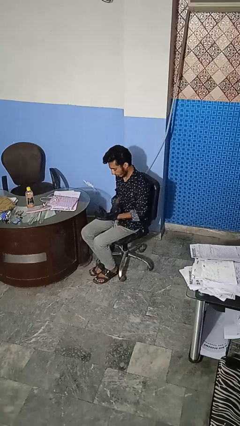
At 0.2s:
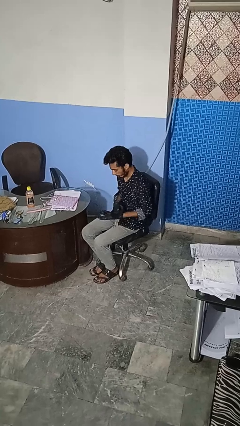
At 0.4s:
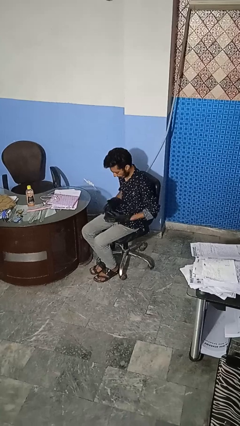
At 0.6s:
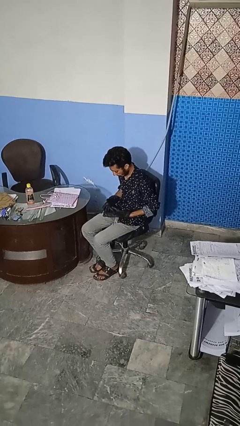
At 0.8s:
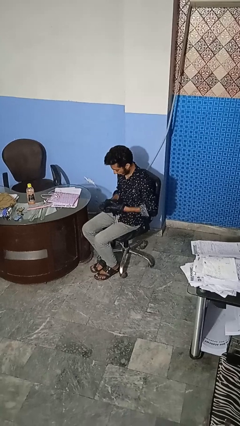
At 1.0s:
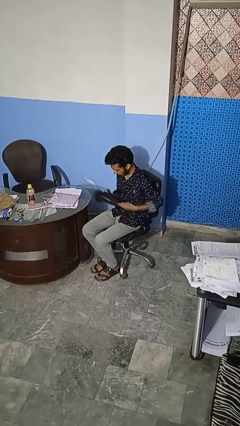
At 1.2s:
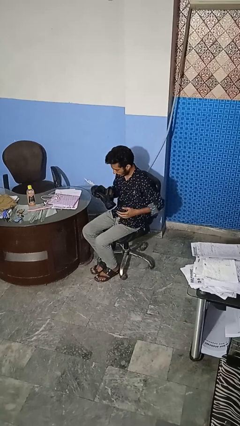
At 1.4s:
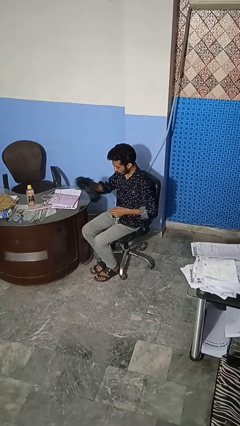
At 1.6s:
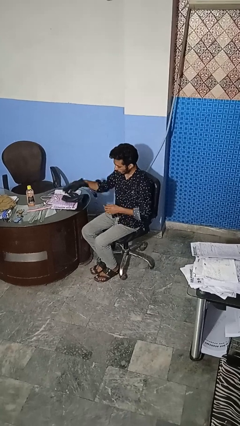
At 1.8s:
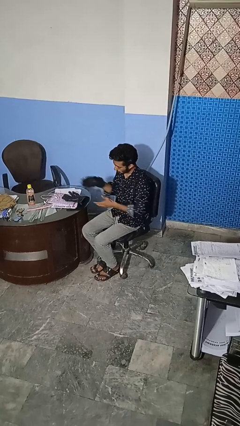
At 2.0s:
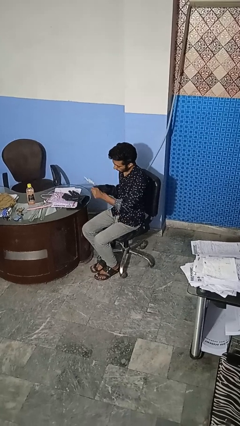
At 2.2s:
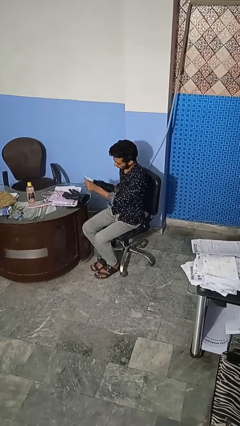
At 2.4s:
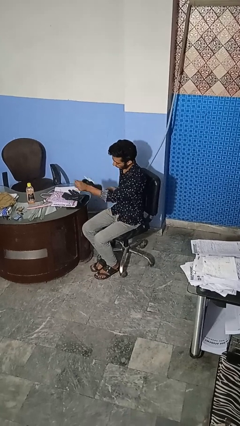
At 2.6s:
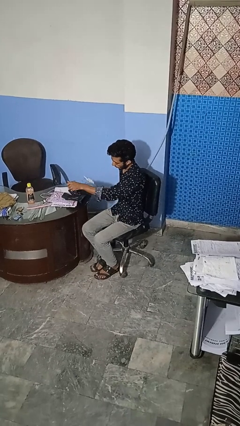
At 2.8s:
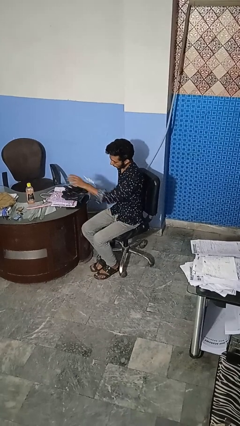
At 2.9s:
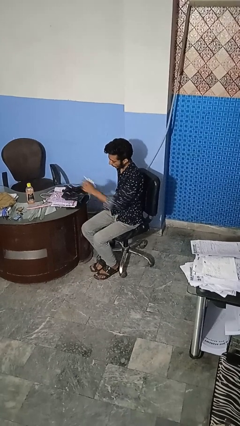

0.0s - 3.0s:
person takes off gloves

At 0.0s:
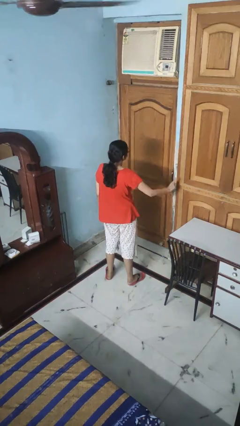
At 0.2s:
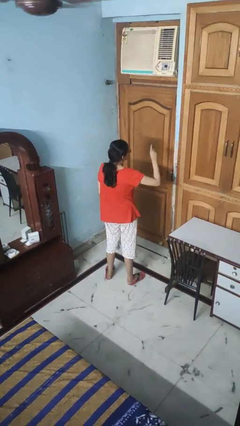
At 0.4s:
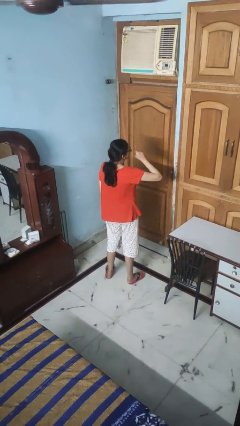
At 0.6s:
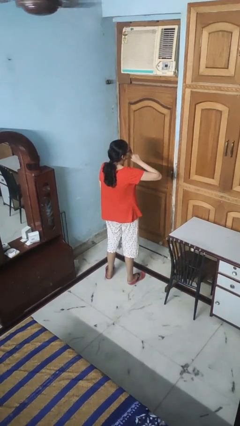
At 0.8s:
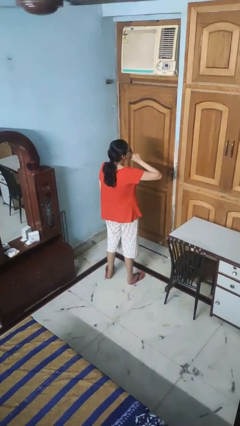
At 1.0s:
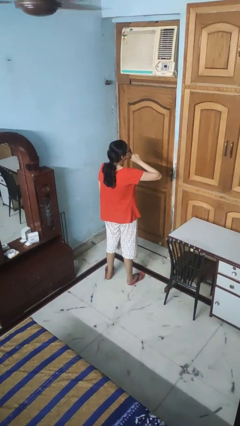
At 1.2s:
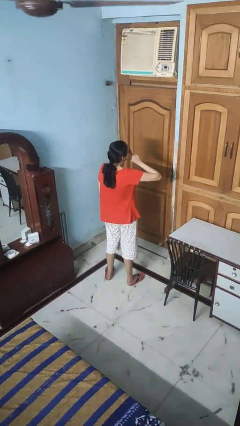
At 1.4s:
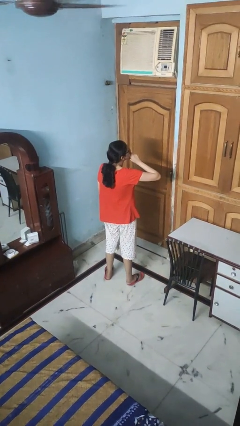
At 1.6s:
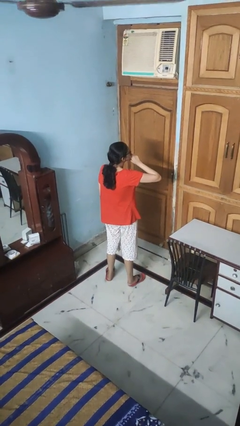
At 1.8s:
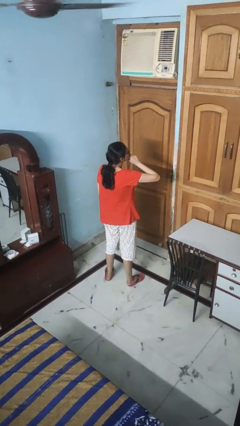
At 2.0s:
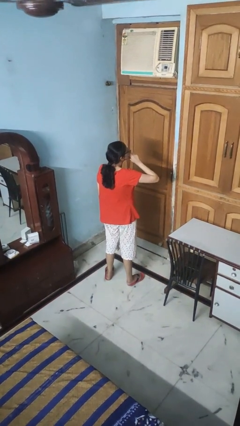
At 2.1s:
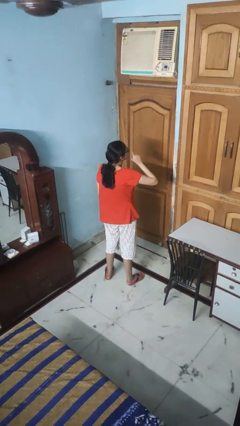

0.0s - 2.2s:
person gestures be quiet

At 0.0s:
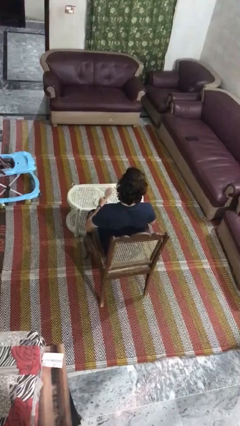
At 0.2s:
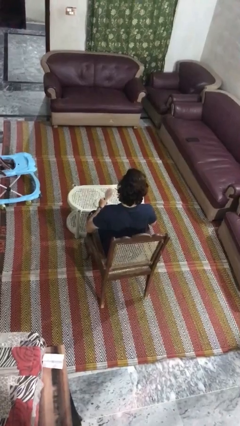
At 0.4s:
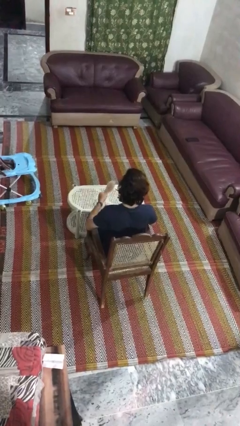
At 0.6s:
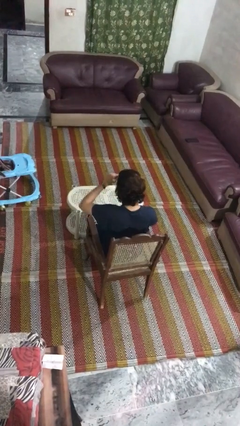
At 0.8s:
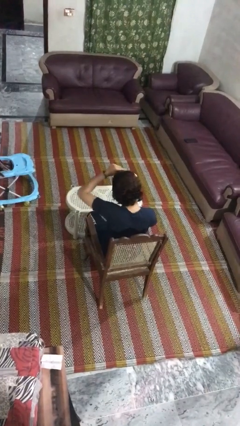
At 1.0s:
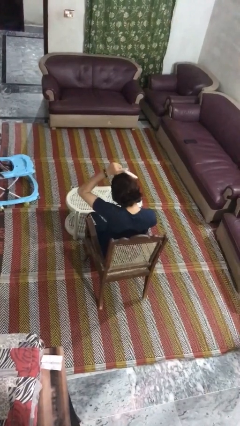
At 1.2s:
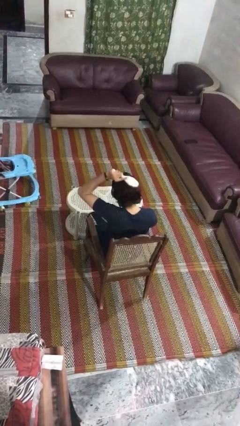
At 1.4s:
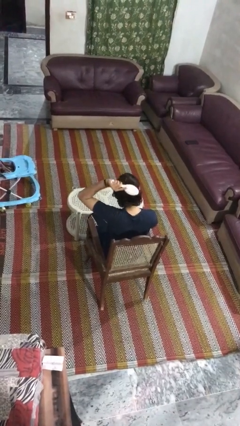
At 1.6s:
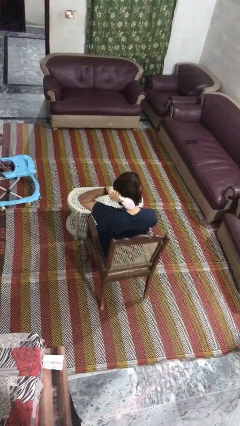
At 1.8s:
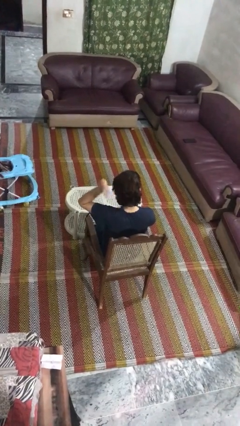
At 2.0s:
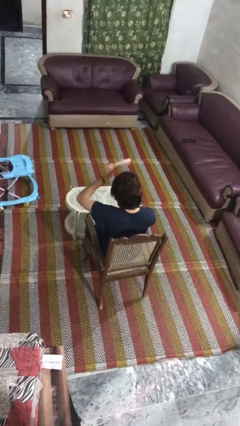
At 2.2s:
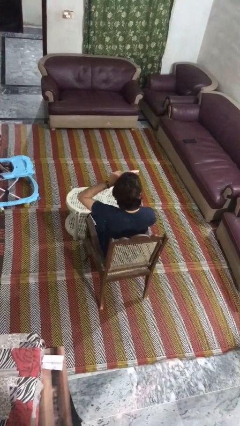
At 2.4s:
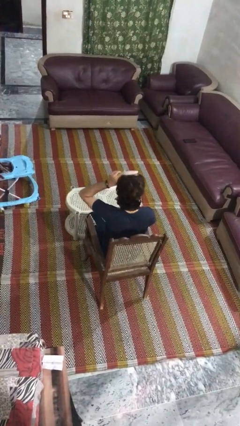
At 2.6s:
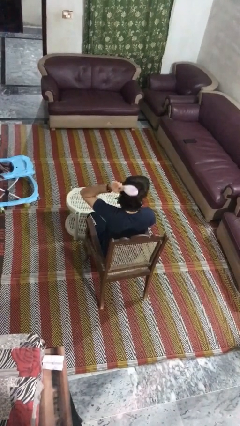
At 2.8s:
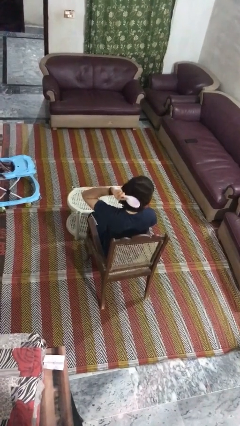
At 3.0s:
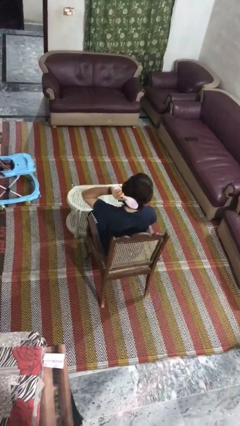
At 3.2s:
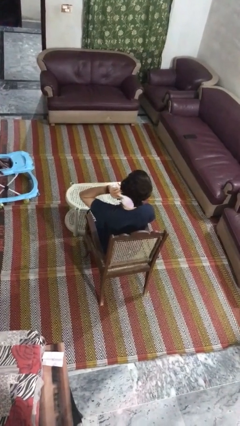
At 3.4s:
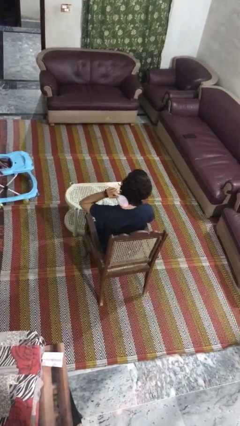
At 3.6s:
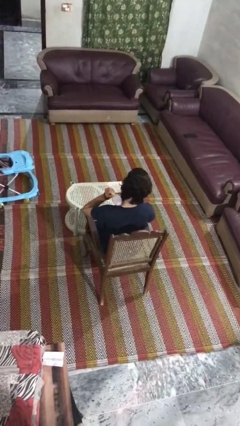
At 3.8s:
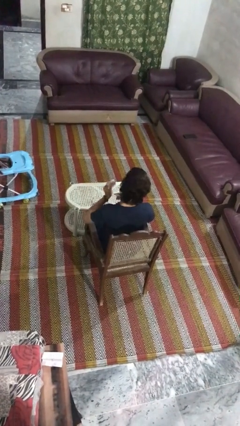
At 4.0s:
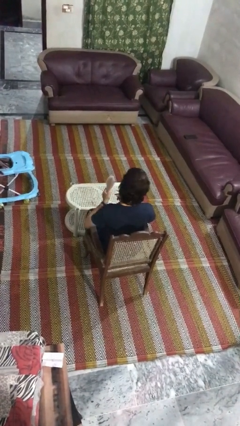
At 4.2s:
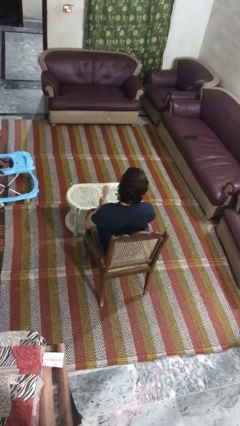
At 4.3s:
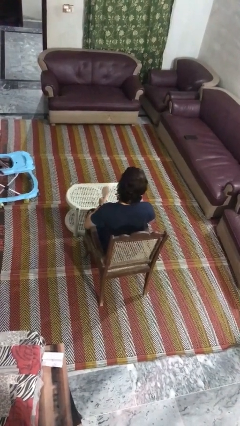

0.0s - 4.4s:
person brushes hair

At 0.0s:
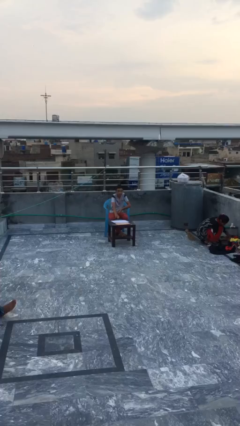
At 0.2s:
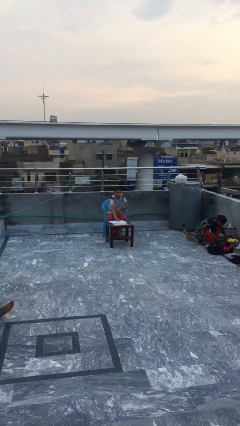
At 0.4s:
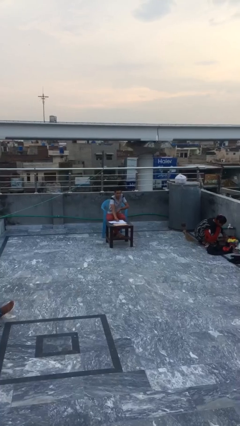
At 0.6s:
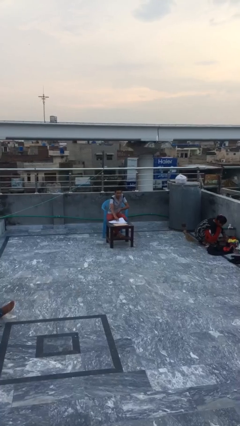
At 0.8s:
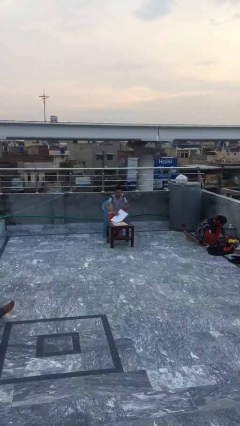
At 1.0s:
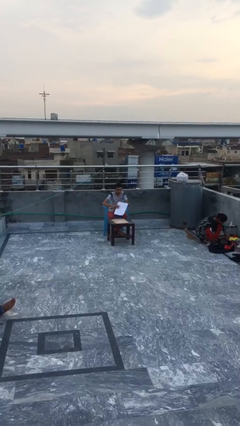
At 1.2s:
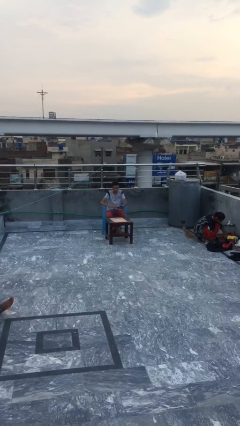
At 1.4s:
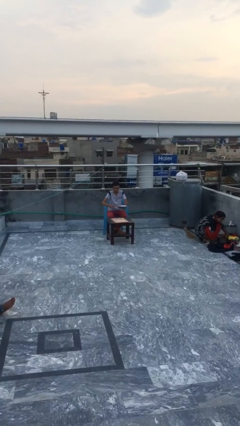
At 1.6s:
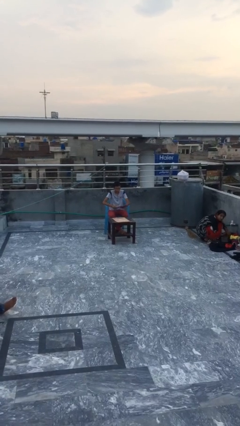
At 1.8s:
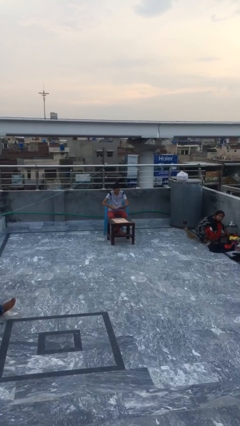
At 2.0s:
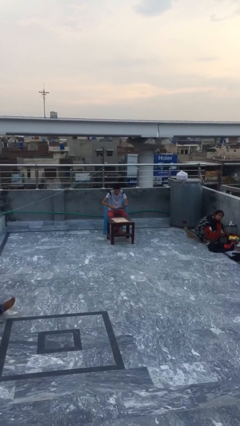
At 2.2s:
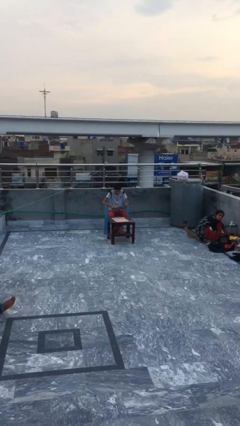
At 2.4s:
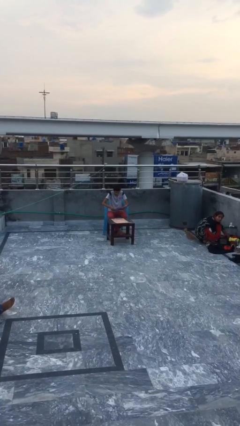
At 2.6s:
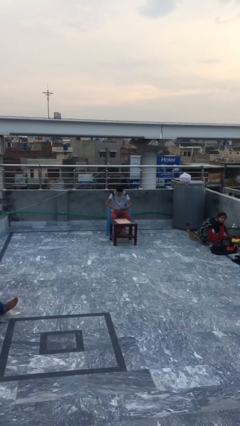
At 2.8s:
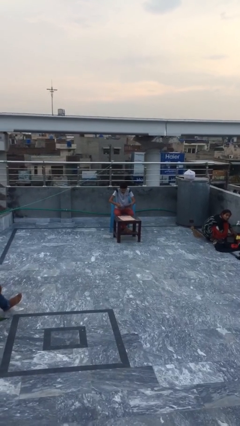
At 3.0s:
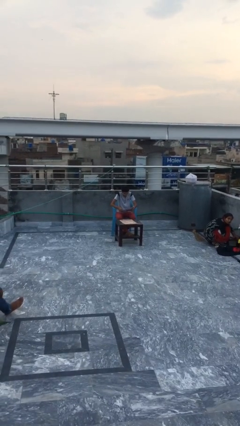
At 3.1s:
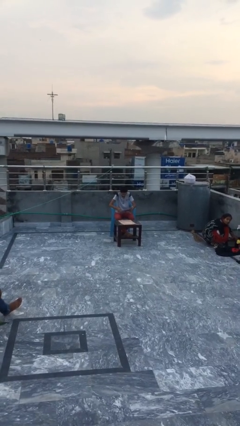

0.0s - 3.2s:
person picks up object from table

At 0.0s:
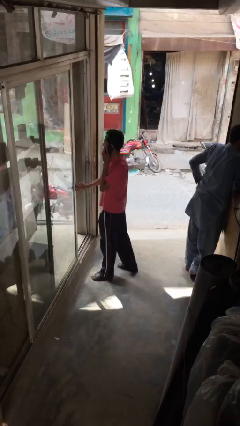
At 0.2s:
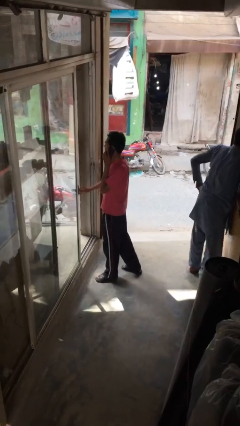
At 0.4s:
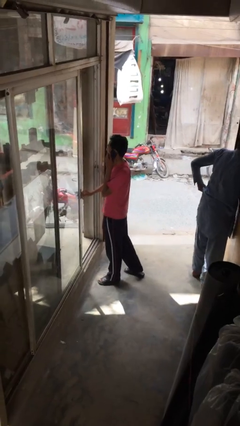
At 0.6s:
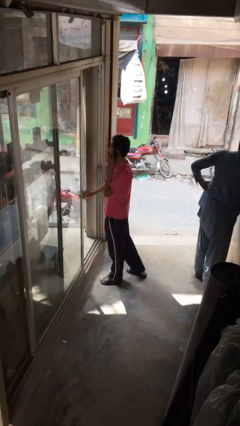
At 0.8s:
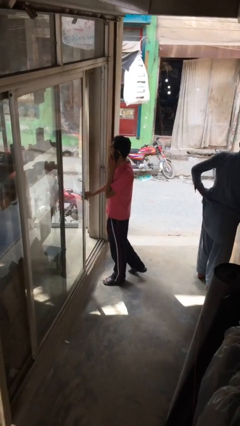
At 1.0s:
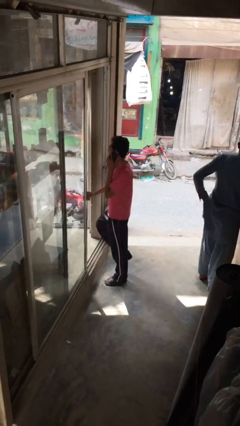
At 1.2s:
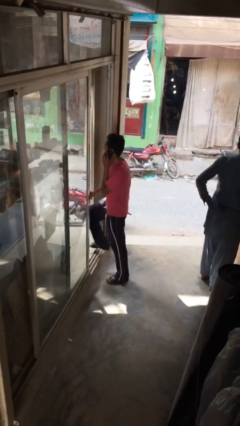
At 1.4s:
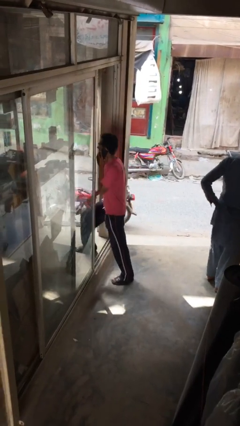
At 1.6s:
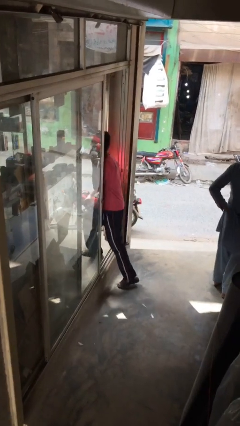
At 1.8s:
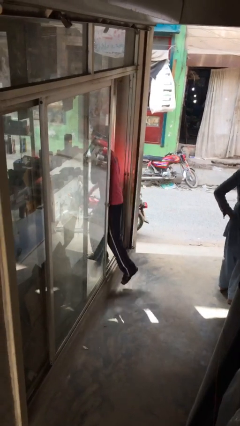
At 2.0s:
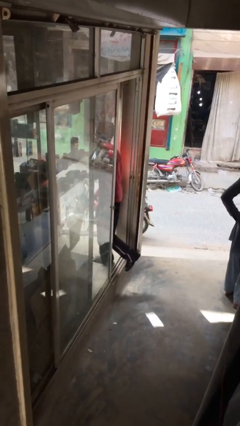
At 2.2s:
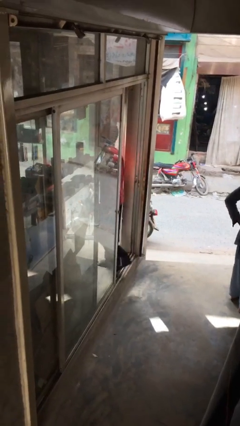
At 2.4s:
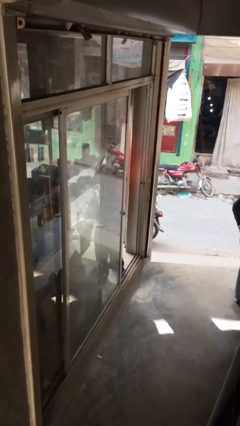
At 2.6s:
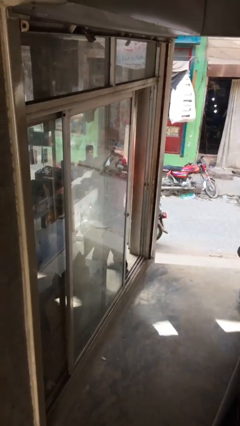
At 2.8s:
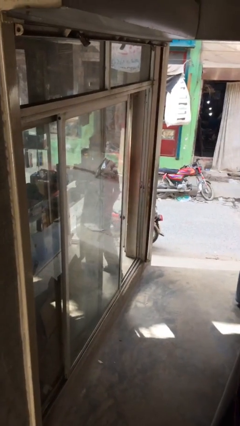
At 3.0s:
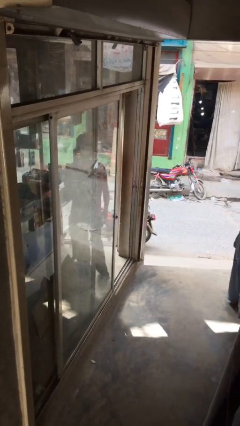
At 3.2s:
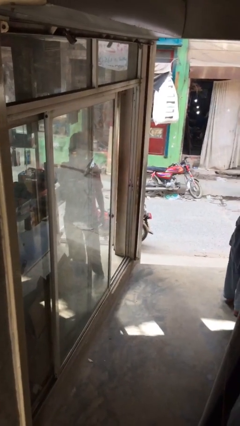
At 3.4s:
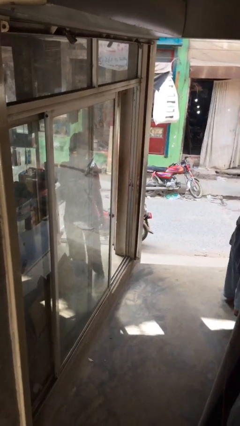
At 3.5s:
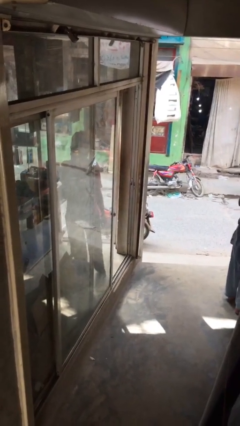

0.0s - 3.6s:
person exits scene through structure

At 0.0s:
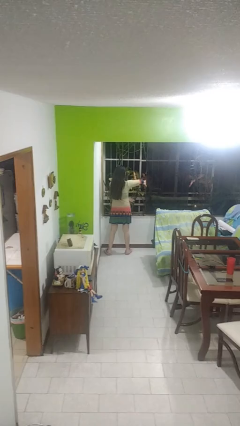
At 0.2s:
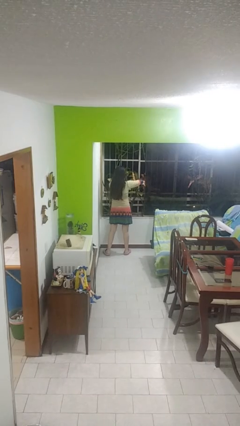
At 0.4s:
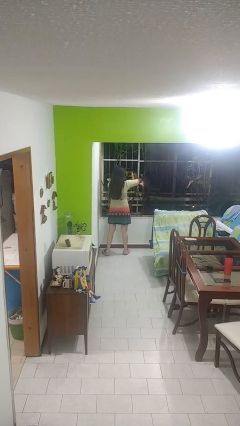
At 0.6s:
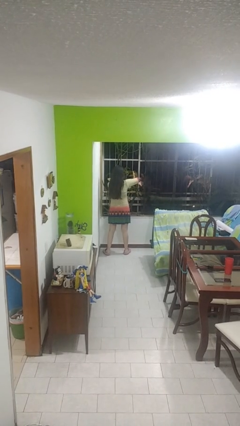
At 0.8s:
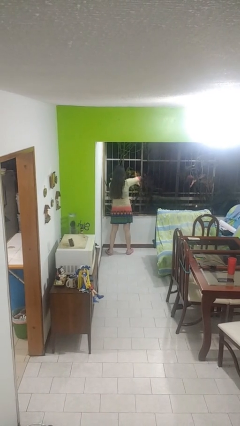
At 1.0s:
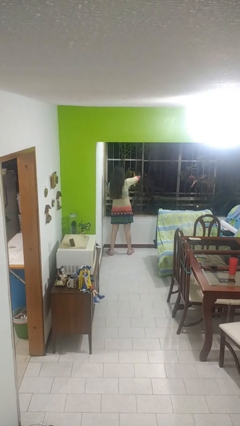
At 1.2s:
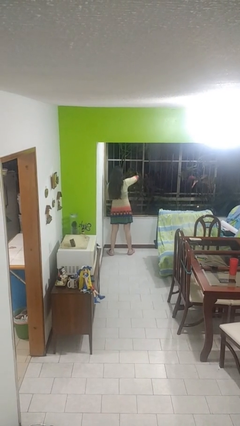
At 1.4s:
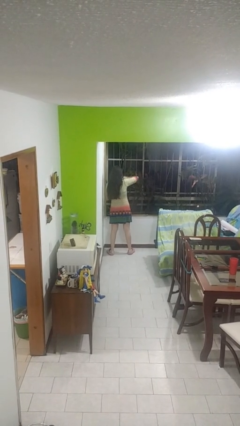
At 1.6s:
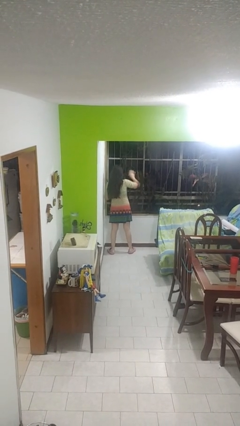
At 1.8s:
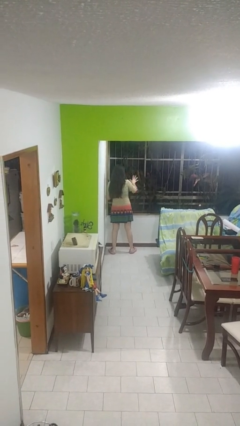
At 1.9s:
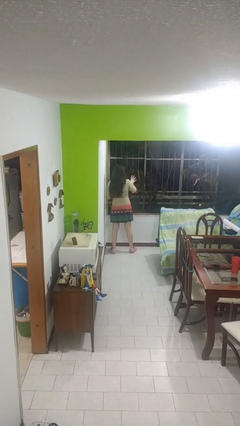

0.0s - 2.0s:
person closes home window
